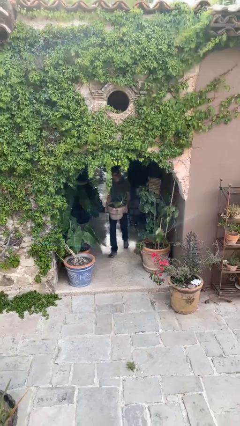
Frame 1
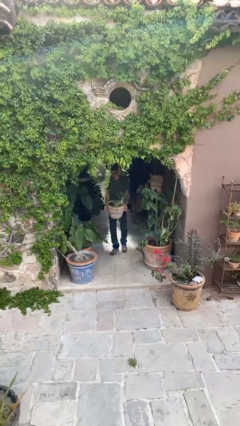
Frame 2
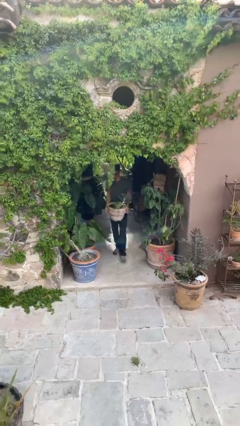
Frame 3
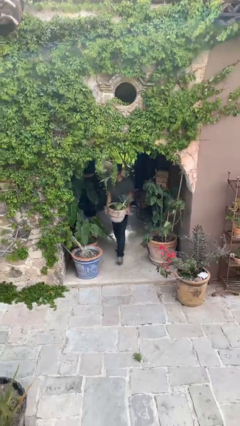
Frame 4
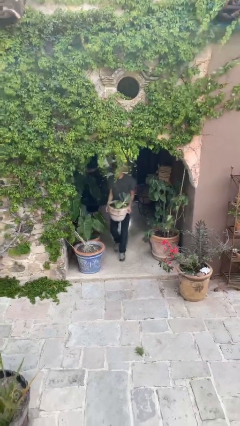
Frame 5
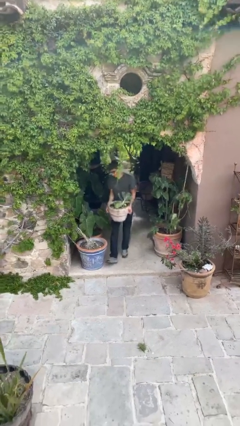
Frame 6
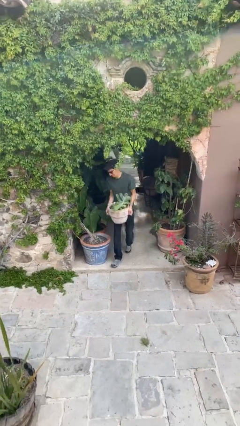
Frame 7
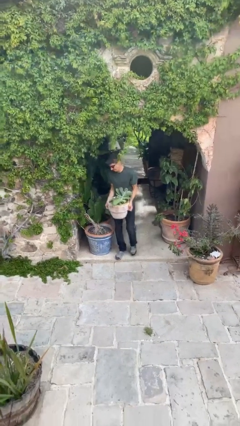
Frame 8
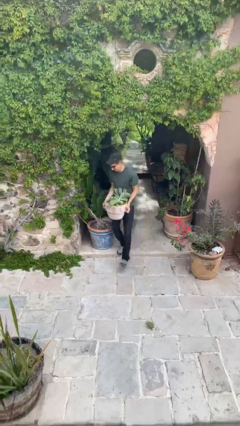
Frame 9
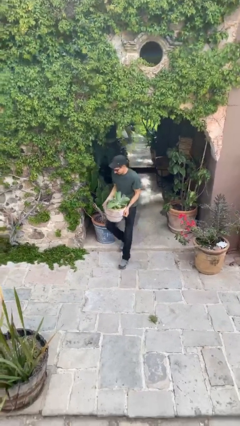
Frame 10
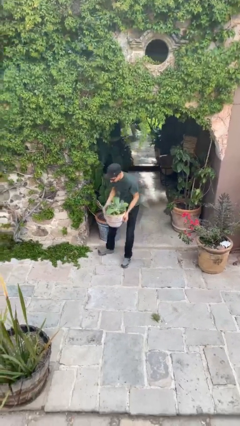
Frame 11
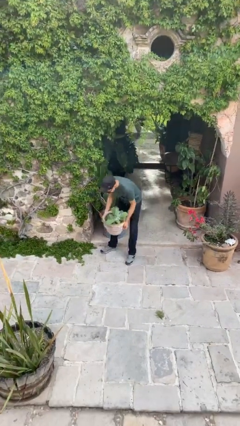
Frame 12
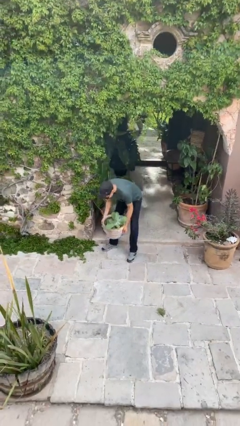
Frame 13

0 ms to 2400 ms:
person carries heavy object

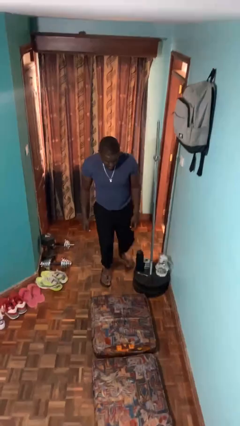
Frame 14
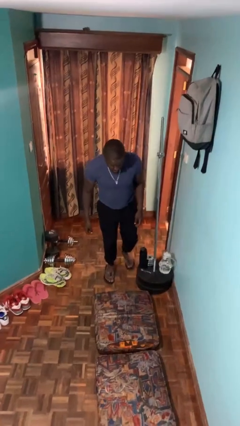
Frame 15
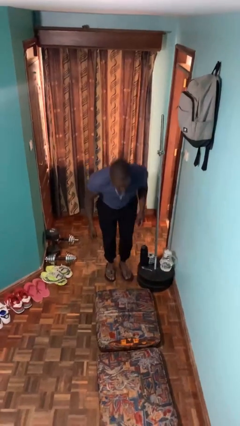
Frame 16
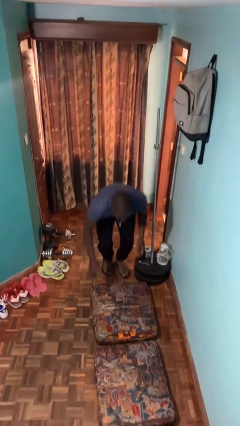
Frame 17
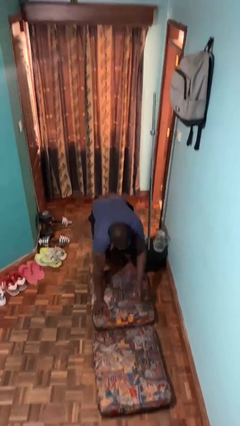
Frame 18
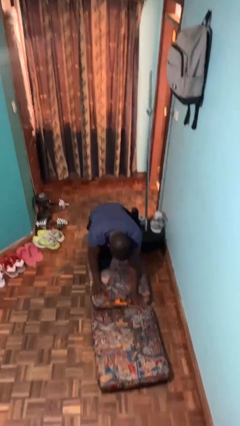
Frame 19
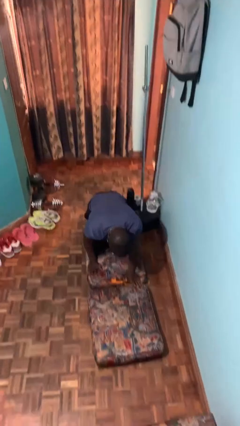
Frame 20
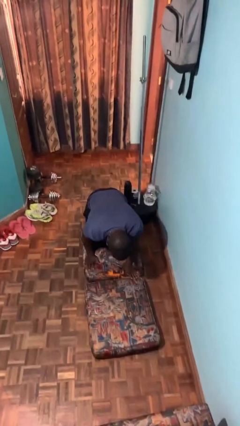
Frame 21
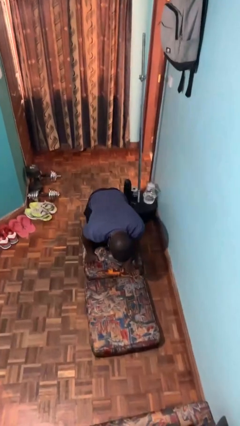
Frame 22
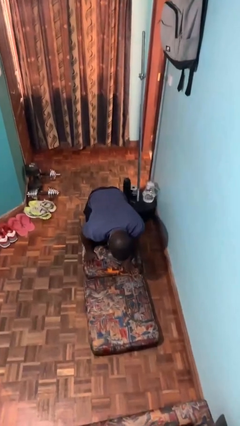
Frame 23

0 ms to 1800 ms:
person trips on object on floor

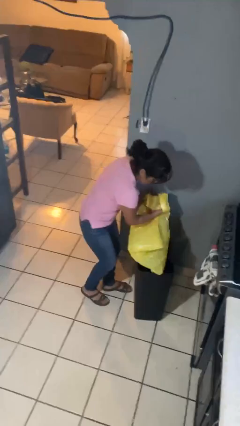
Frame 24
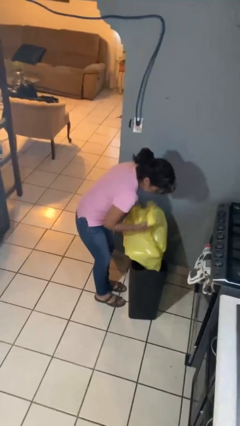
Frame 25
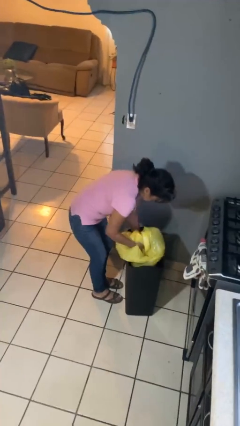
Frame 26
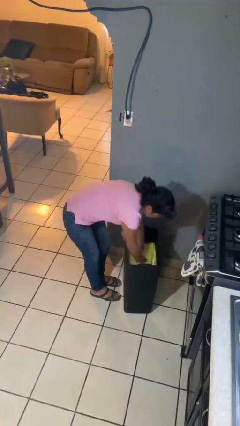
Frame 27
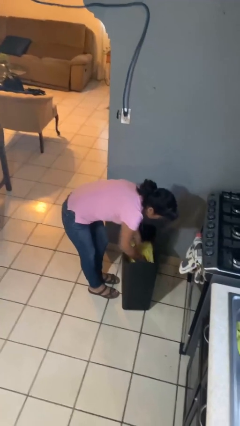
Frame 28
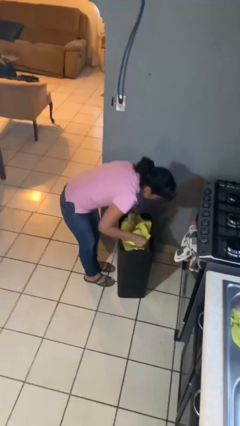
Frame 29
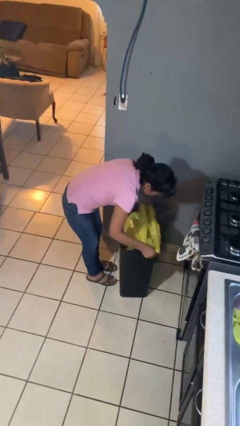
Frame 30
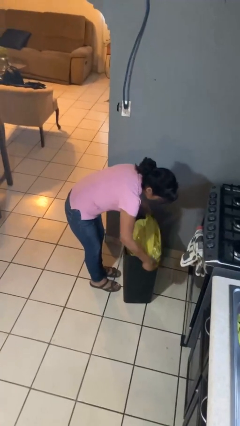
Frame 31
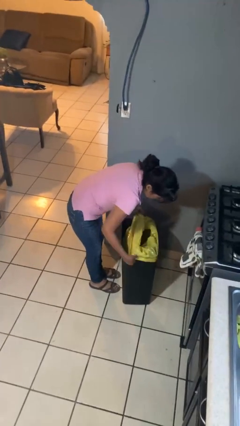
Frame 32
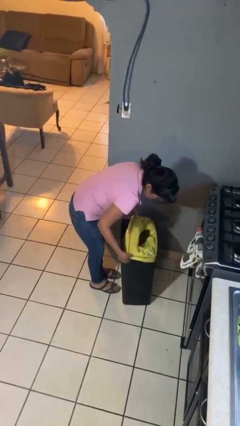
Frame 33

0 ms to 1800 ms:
person inserts trashbag into trashcan

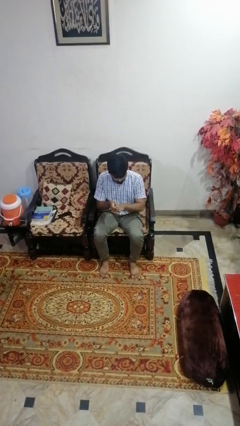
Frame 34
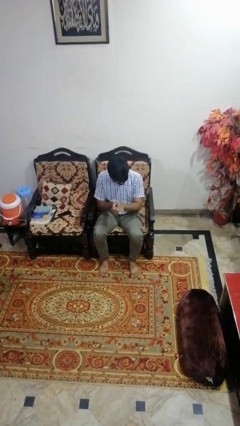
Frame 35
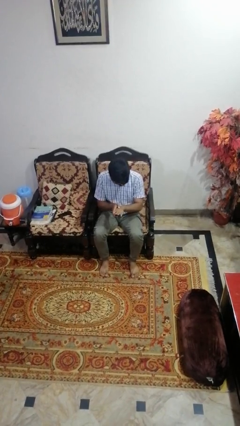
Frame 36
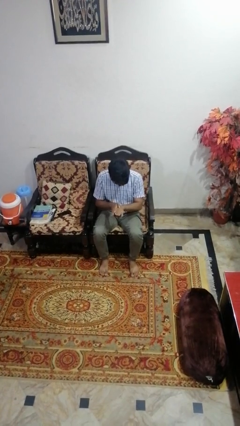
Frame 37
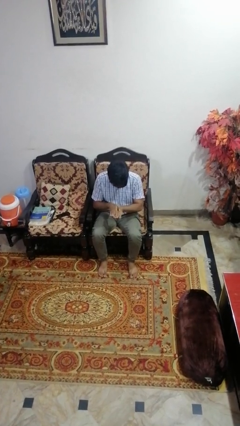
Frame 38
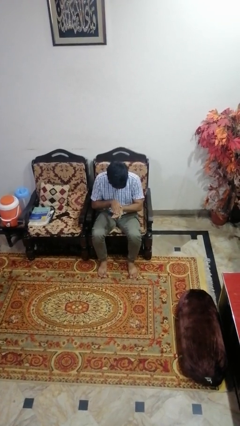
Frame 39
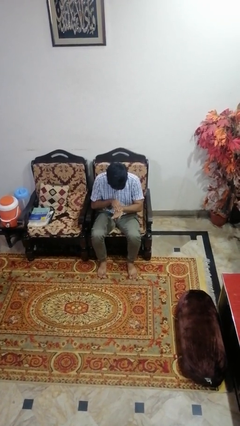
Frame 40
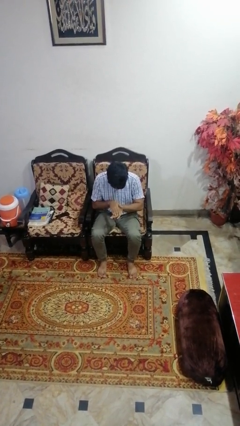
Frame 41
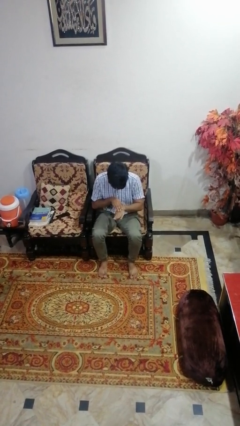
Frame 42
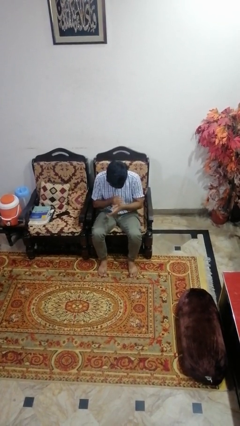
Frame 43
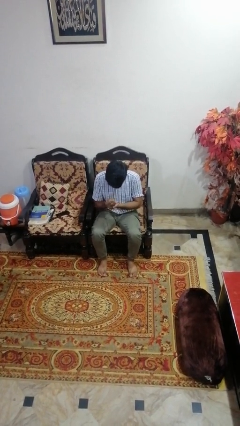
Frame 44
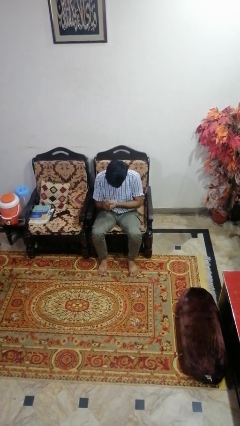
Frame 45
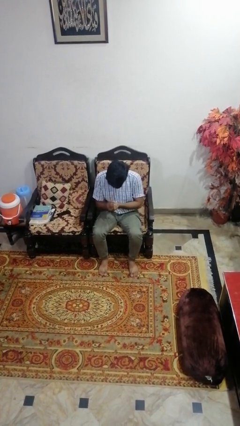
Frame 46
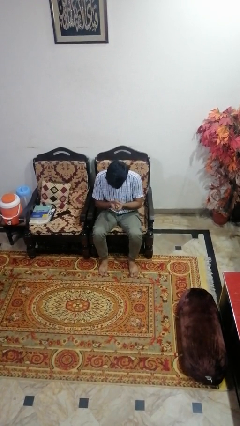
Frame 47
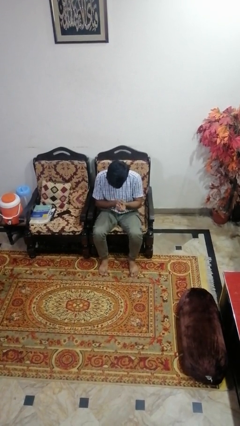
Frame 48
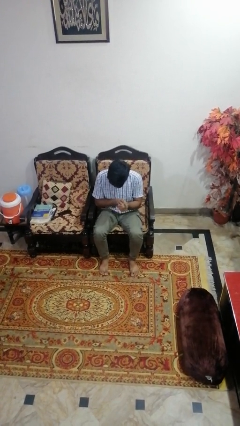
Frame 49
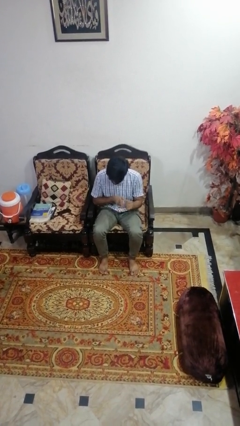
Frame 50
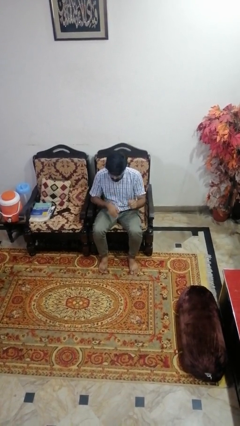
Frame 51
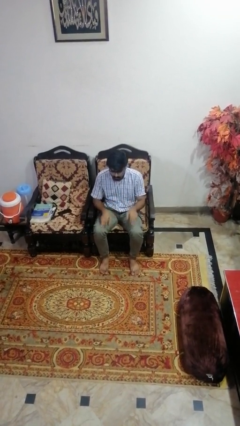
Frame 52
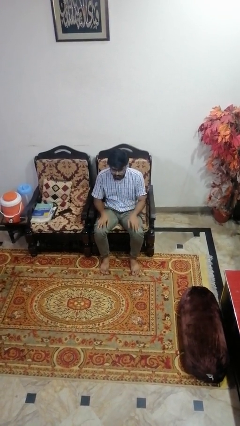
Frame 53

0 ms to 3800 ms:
person looks at hands in lap

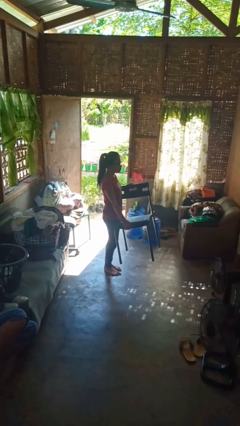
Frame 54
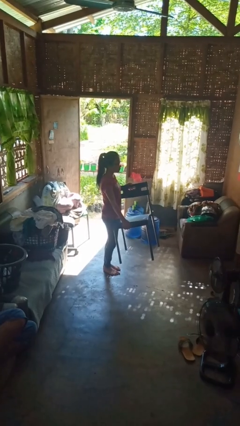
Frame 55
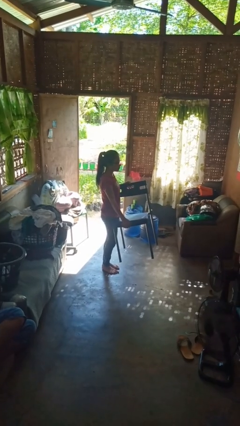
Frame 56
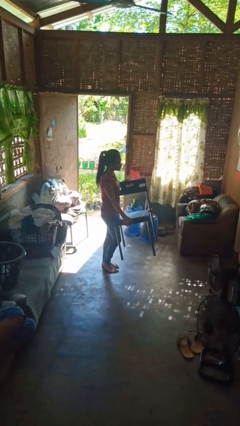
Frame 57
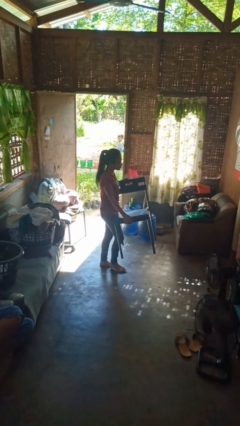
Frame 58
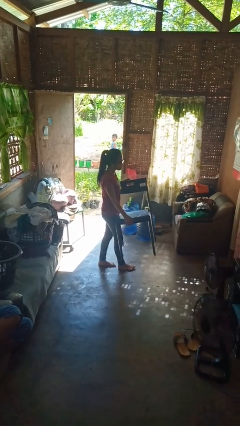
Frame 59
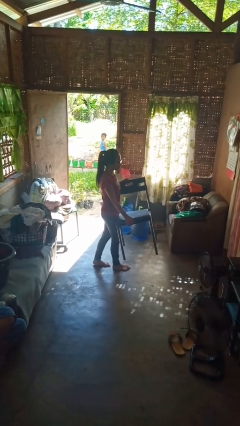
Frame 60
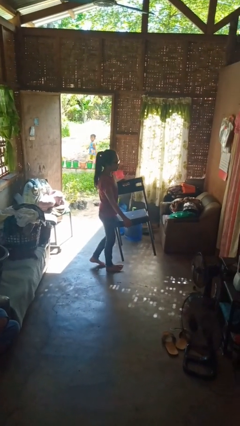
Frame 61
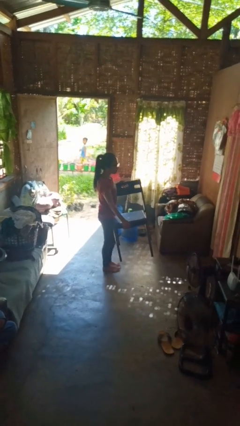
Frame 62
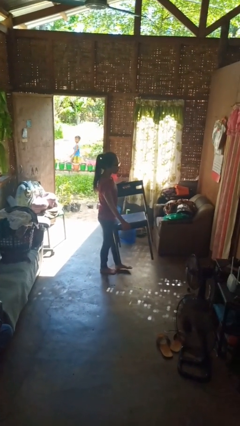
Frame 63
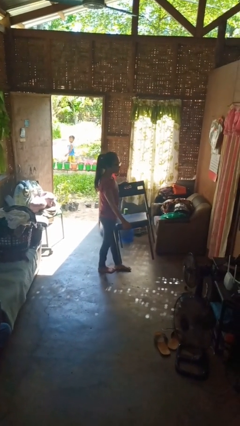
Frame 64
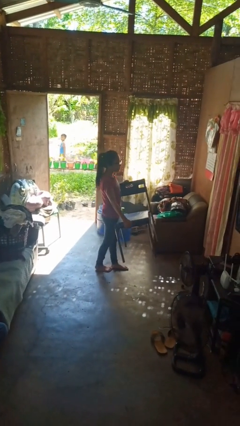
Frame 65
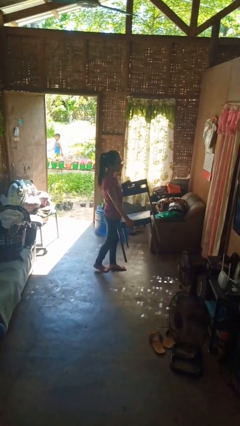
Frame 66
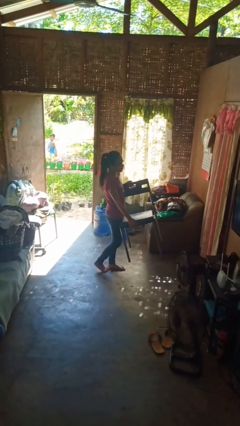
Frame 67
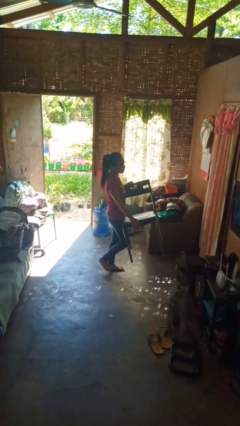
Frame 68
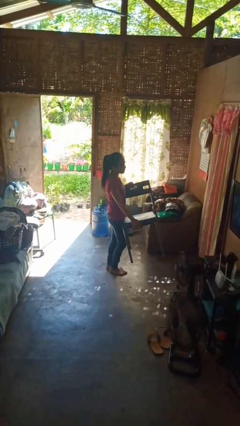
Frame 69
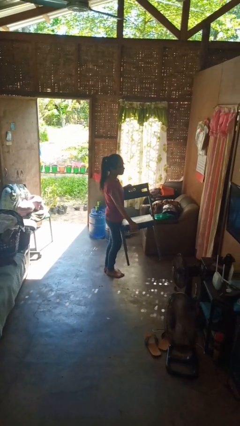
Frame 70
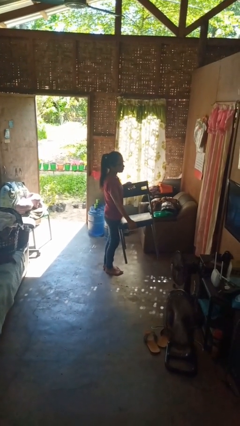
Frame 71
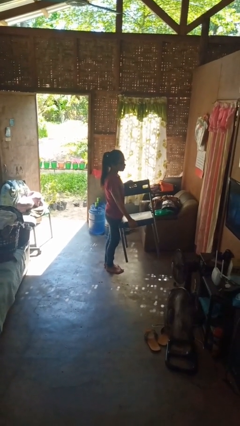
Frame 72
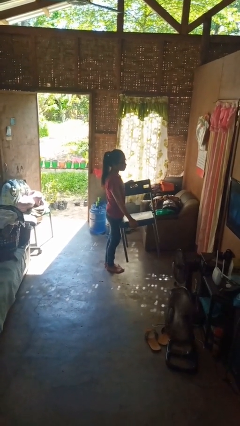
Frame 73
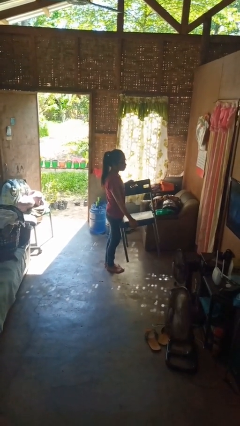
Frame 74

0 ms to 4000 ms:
person carries furniture

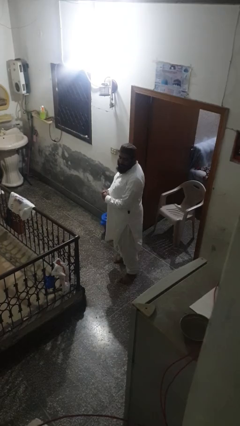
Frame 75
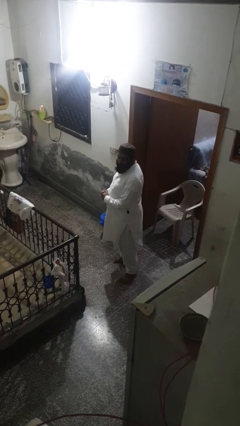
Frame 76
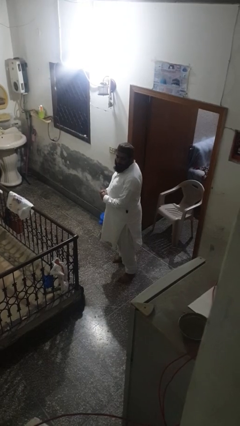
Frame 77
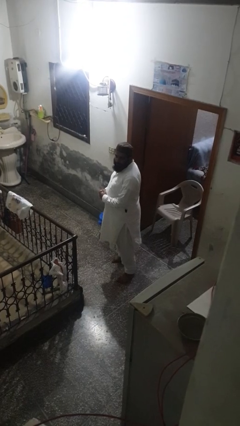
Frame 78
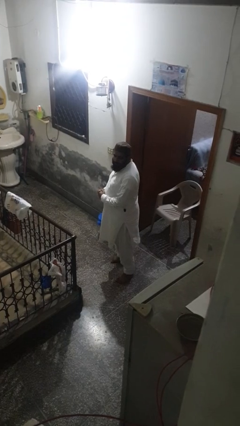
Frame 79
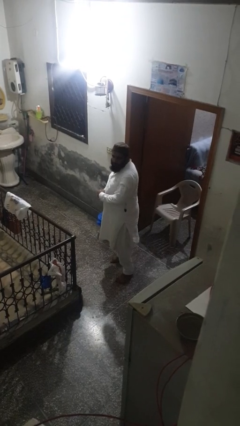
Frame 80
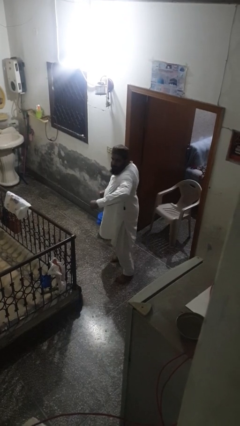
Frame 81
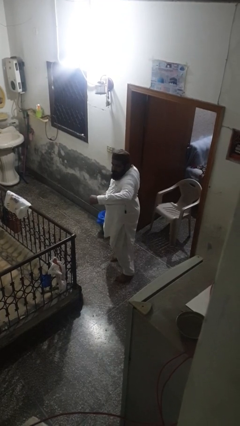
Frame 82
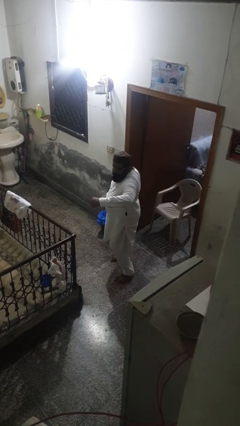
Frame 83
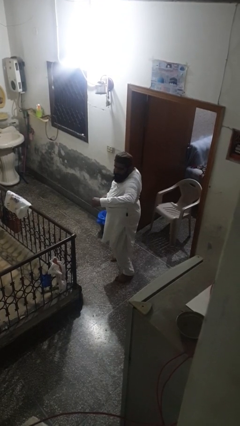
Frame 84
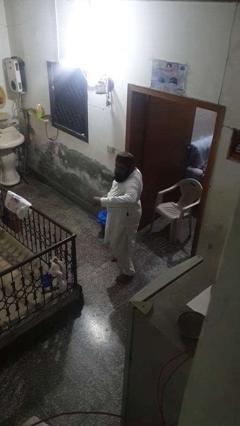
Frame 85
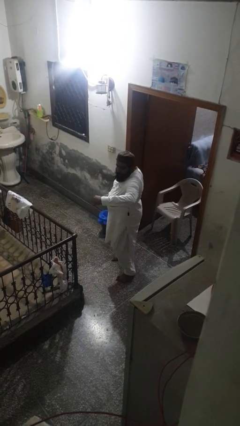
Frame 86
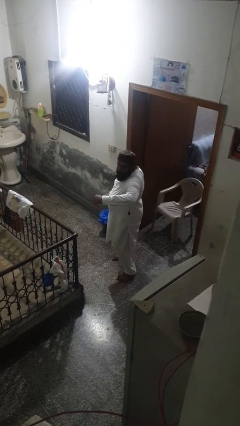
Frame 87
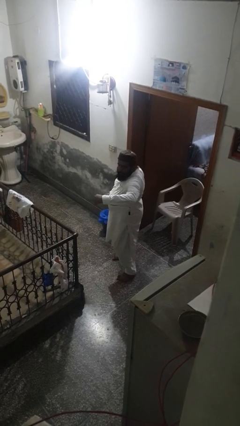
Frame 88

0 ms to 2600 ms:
person karate chop

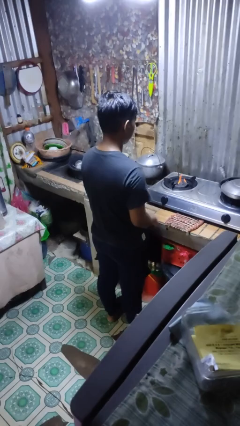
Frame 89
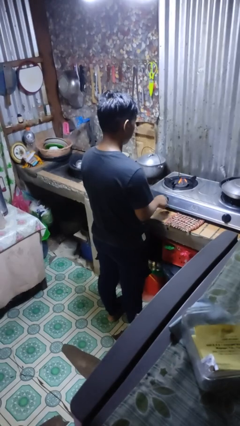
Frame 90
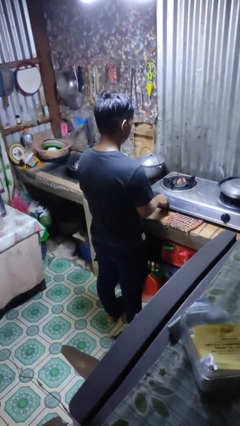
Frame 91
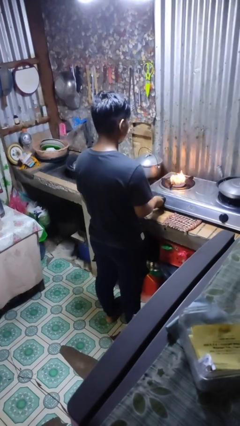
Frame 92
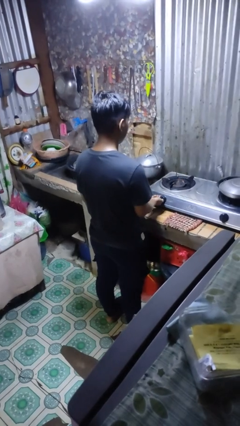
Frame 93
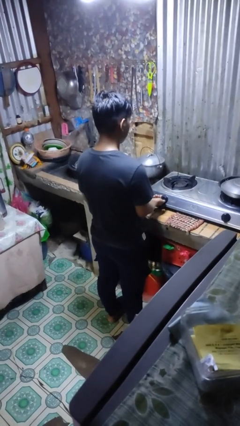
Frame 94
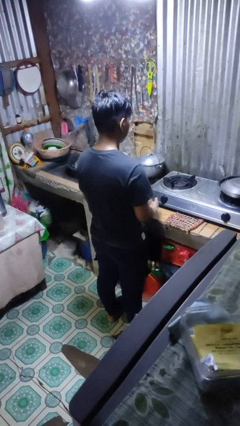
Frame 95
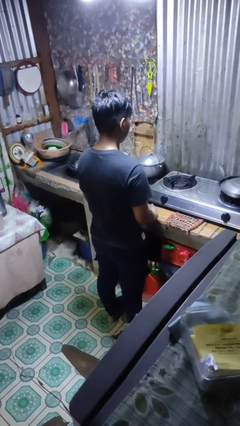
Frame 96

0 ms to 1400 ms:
person turns off stovetop
